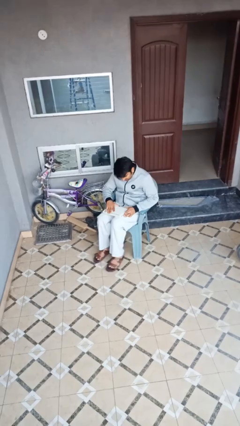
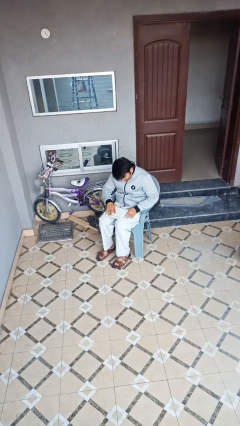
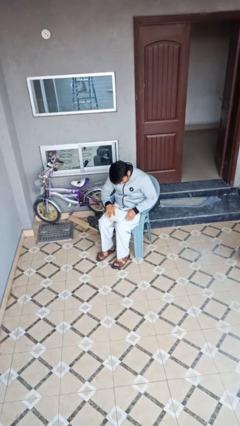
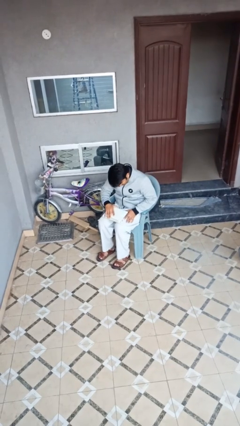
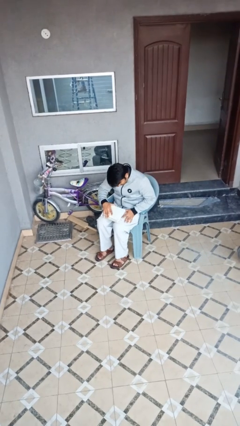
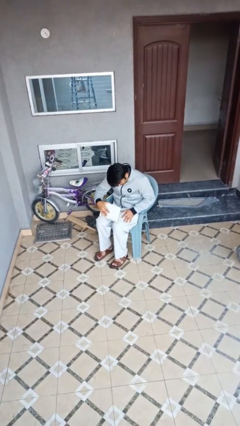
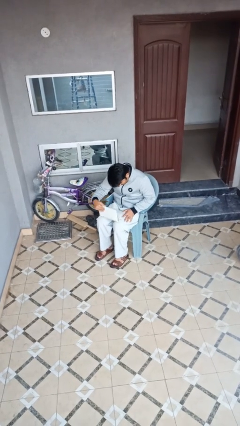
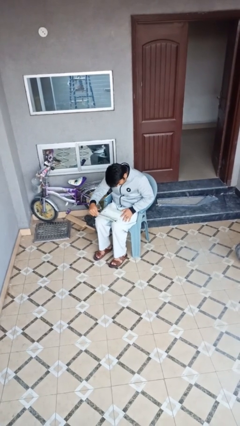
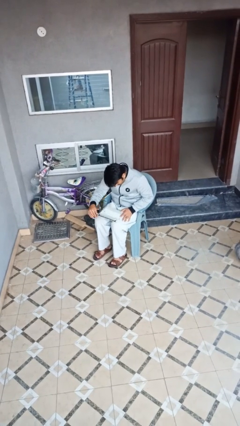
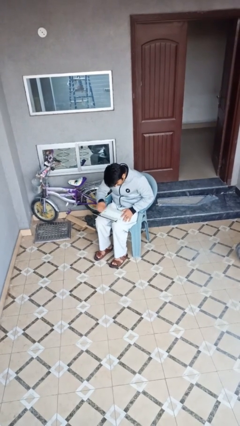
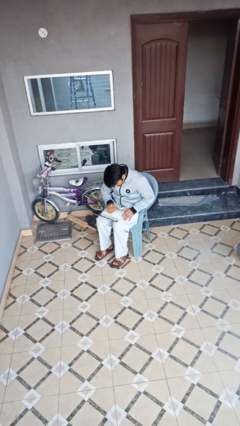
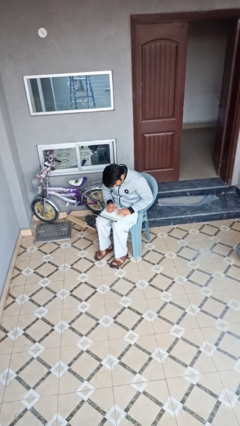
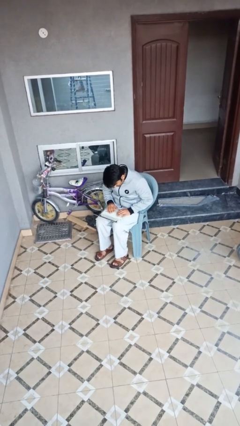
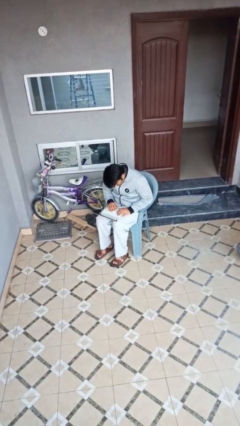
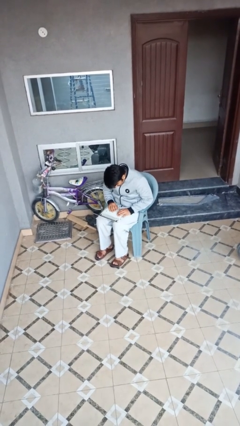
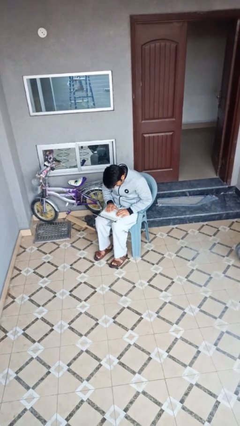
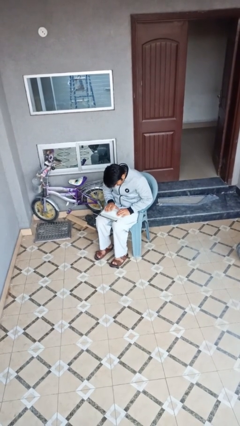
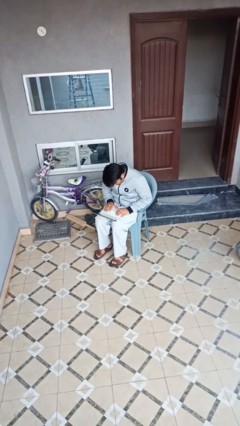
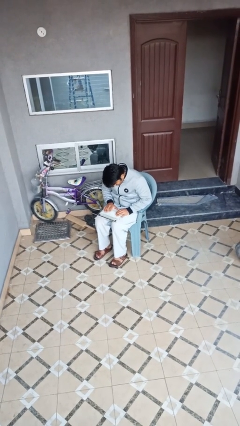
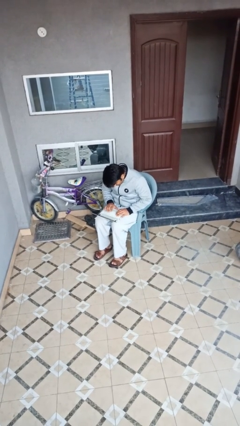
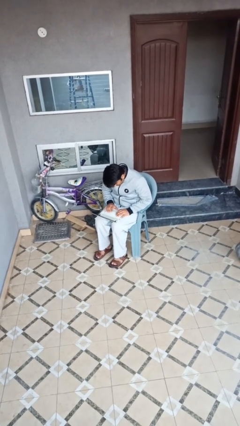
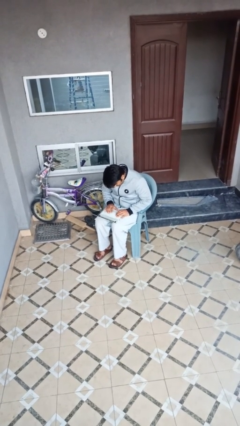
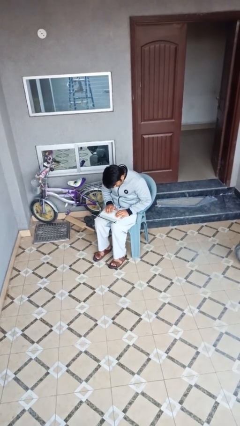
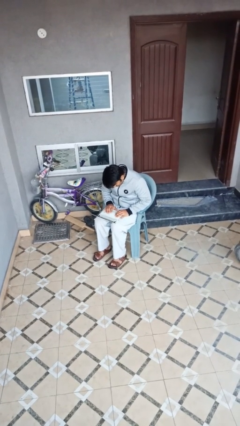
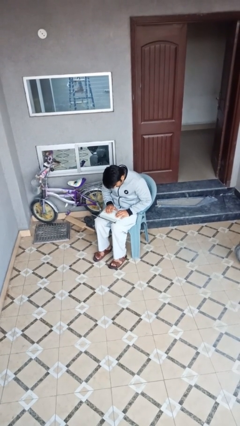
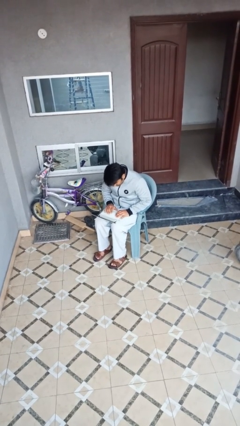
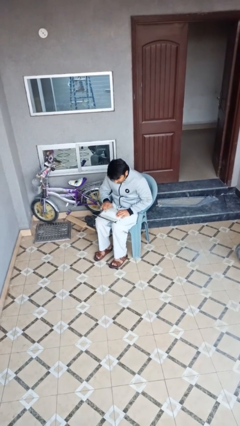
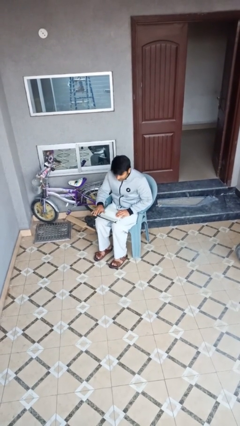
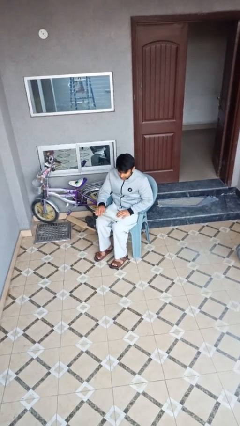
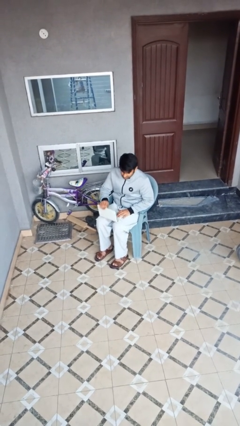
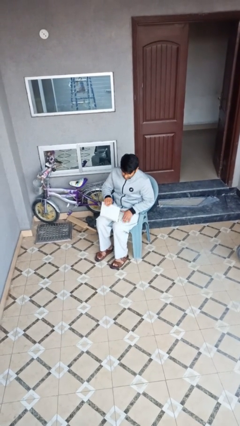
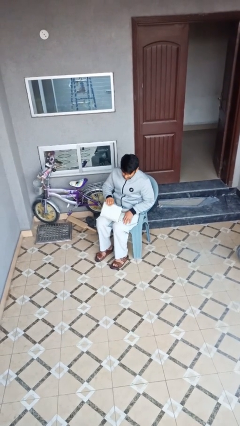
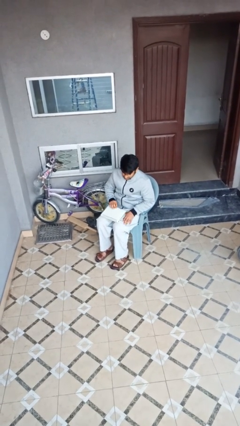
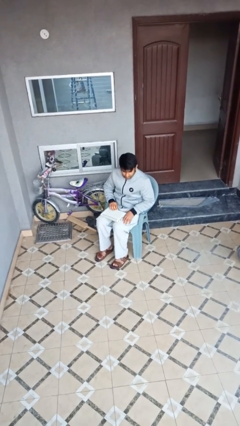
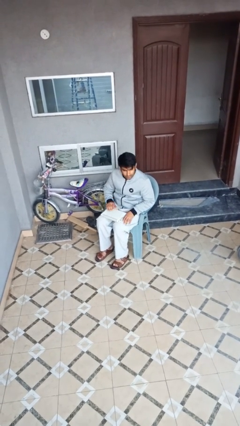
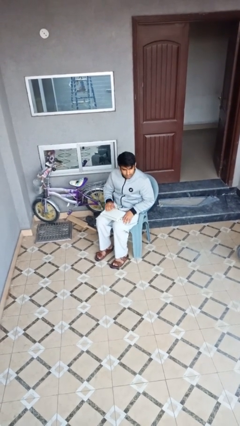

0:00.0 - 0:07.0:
person interacts with laptop

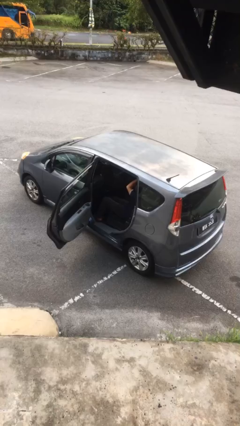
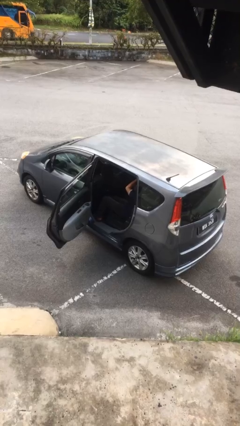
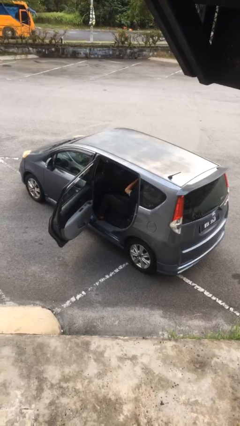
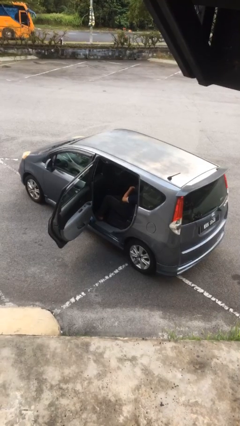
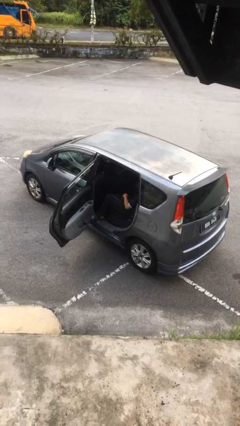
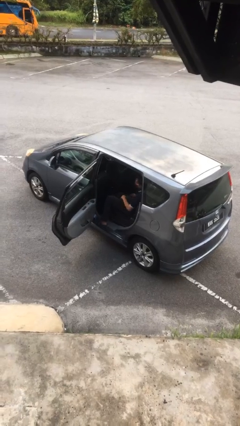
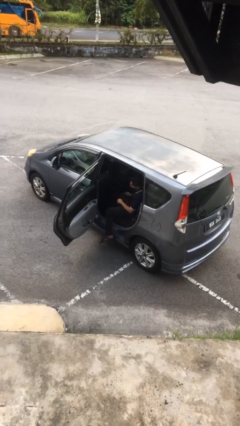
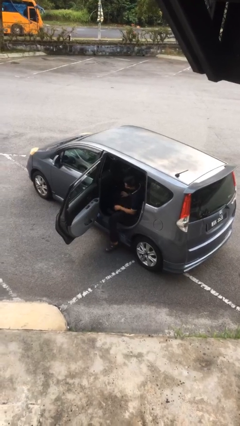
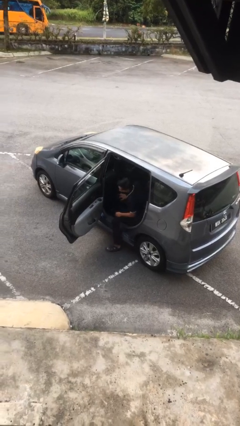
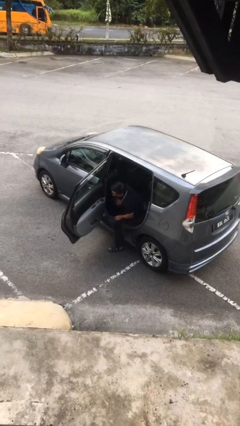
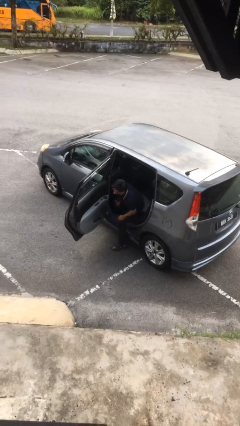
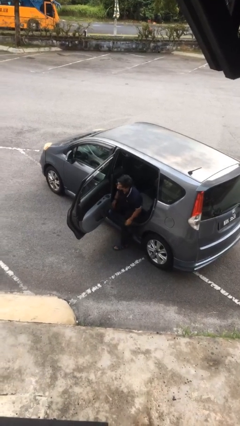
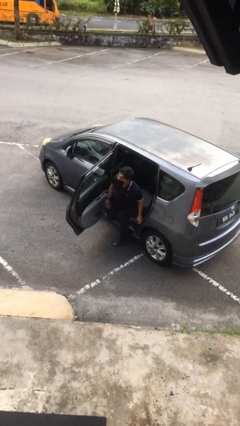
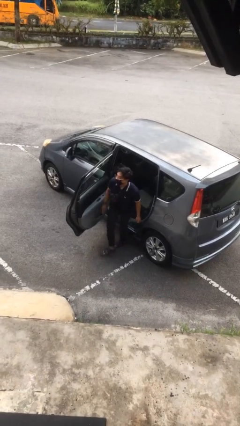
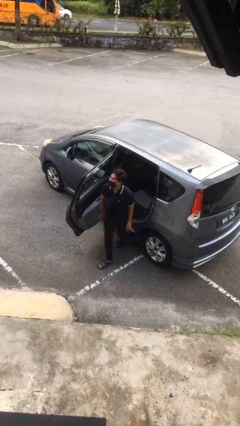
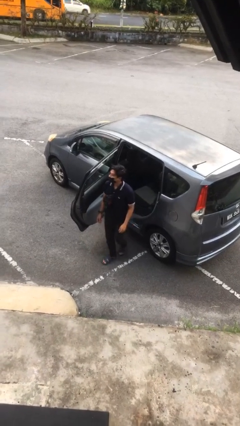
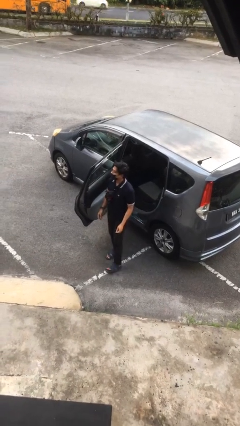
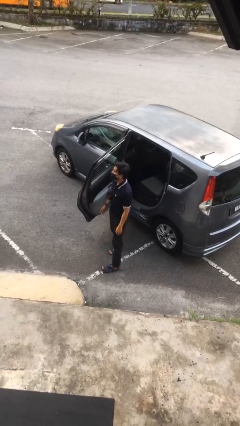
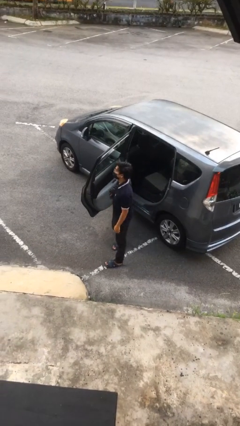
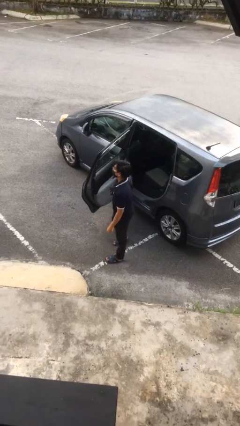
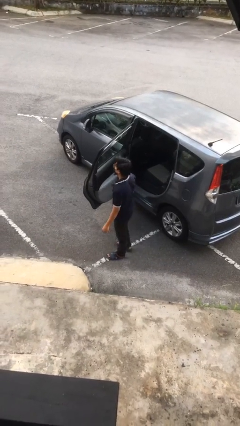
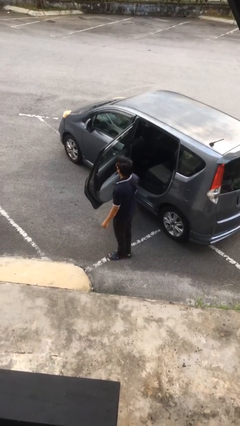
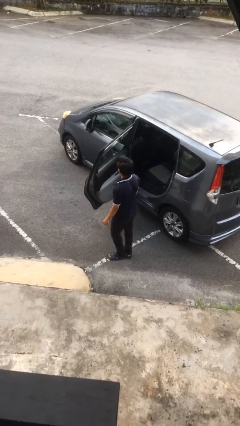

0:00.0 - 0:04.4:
person exits car

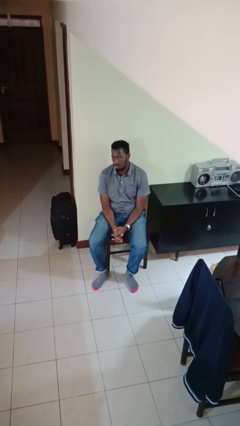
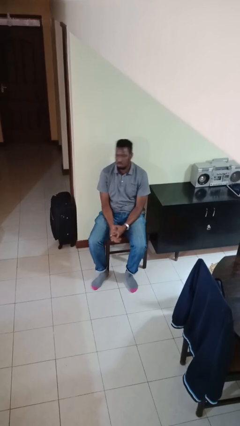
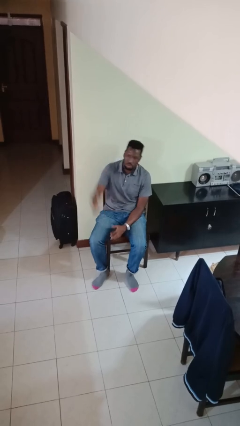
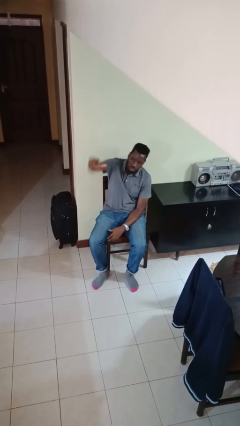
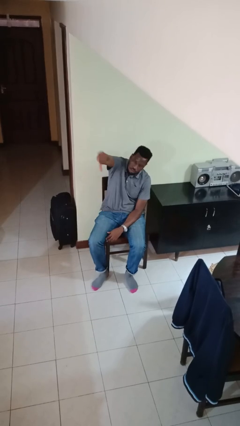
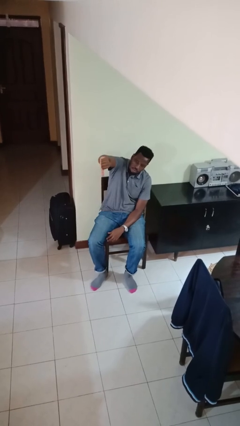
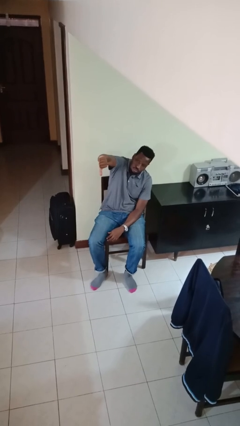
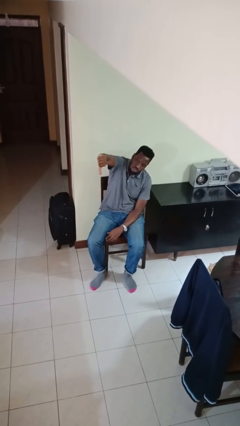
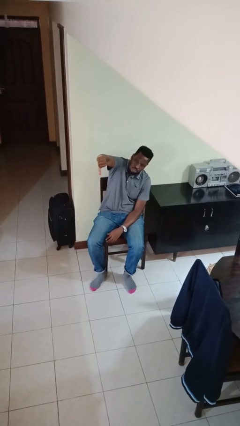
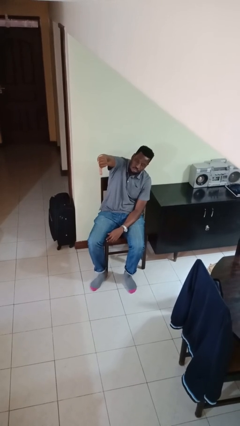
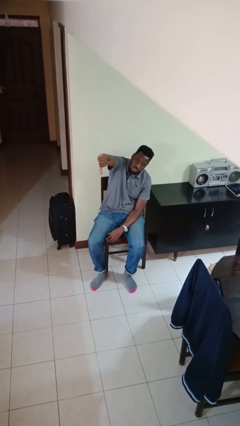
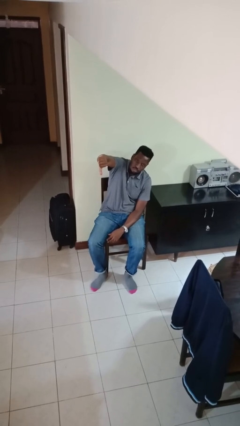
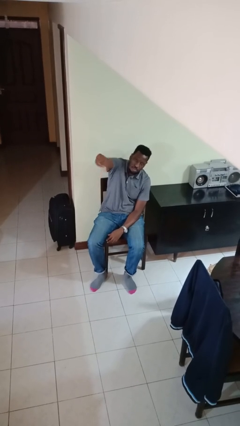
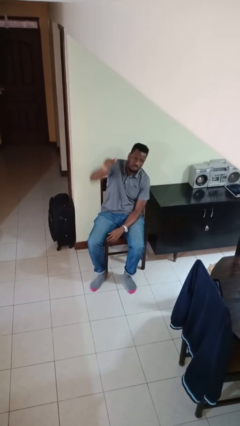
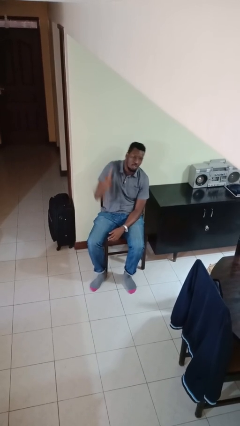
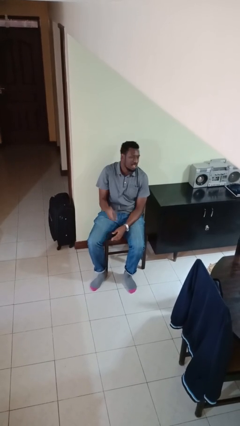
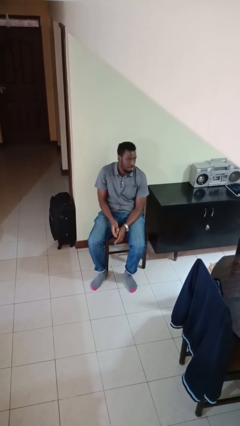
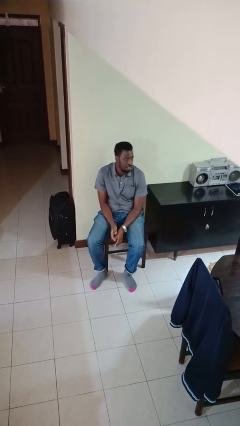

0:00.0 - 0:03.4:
person gestures thumbs down

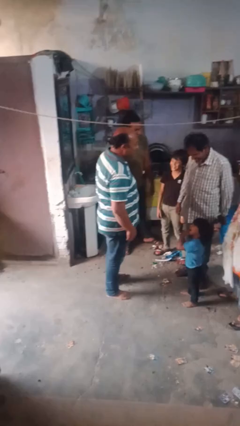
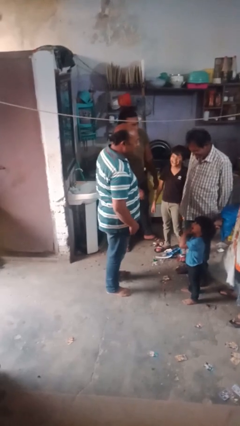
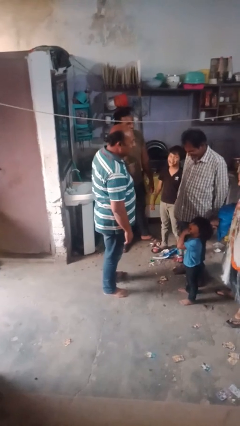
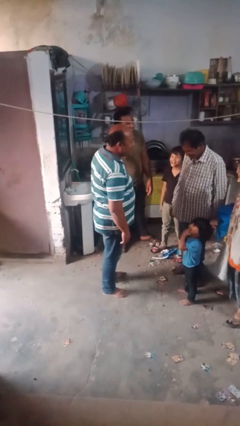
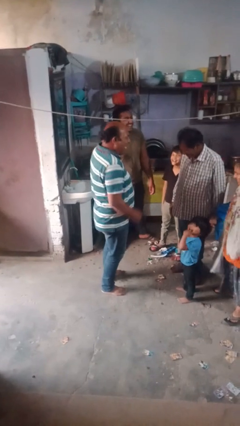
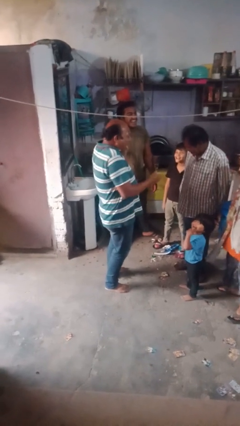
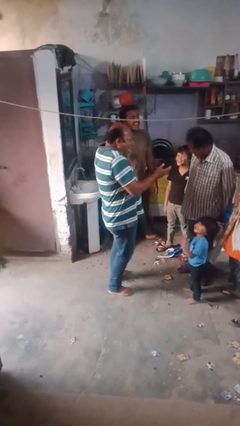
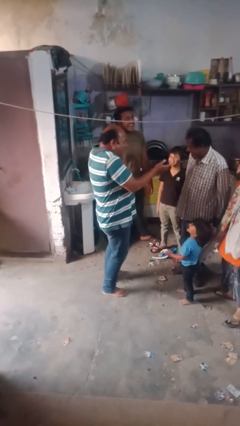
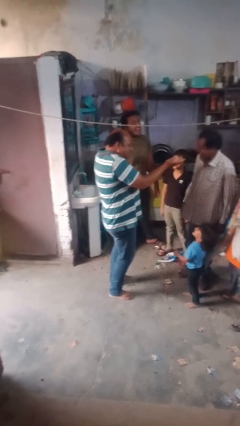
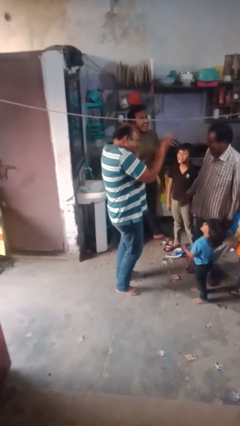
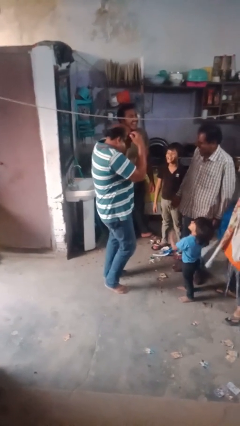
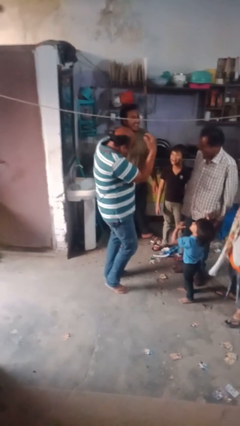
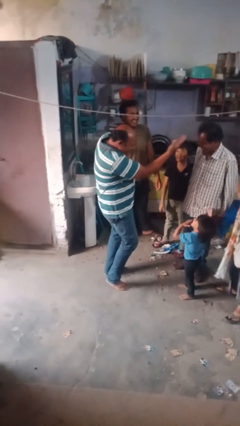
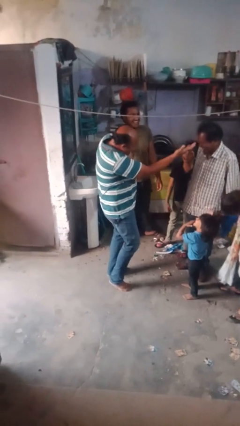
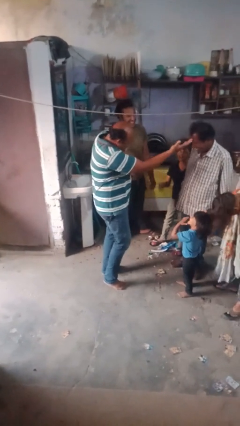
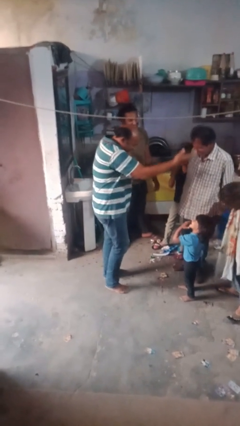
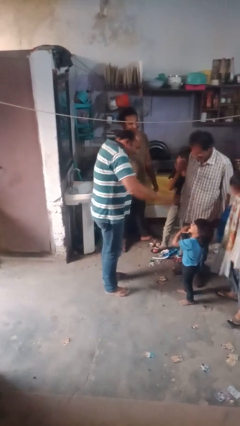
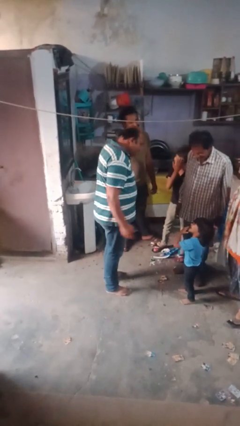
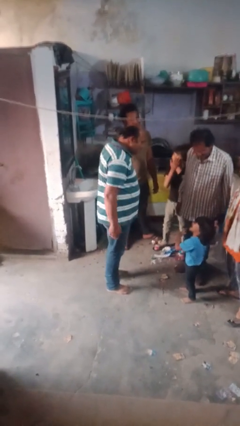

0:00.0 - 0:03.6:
person laughs with person
